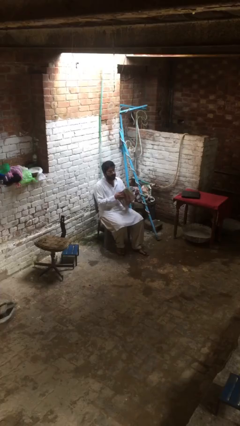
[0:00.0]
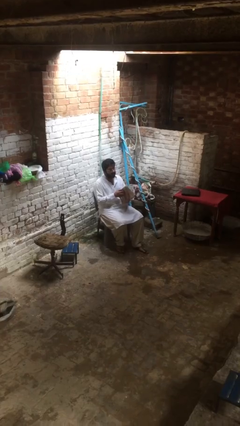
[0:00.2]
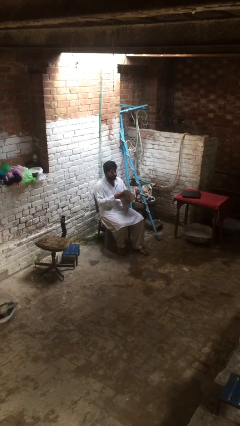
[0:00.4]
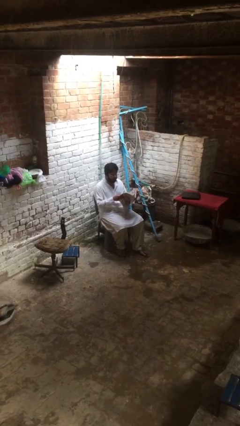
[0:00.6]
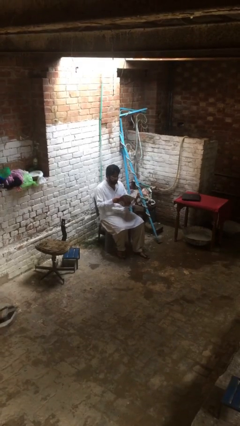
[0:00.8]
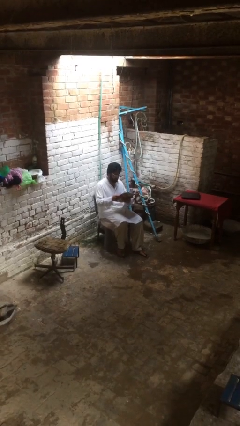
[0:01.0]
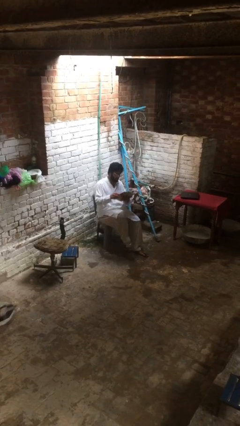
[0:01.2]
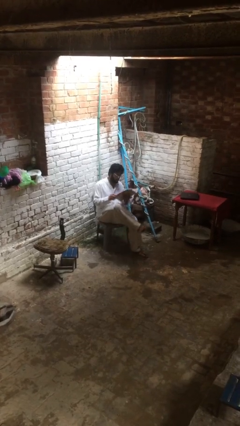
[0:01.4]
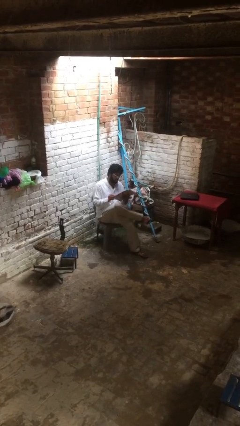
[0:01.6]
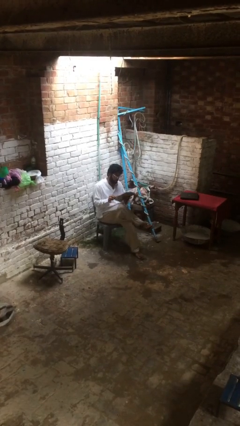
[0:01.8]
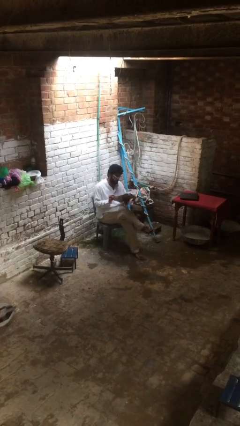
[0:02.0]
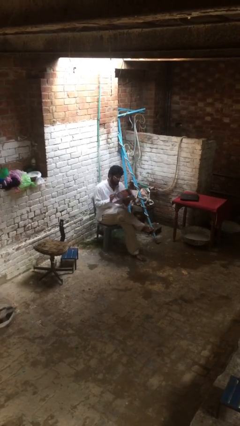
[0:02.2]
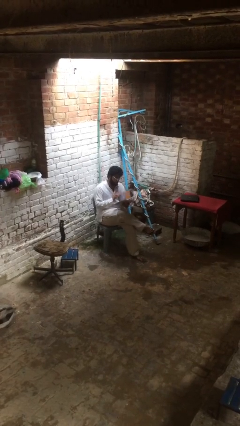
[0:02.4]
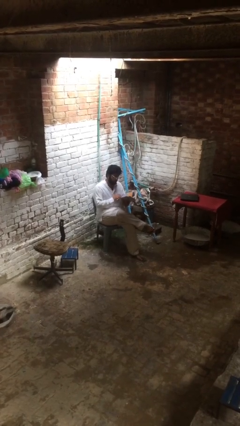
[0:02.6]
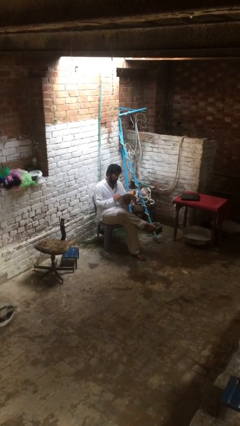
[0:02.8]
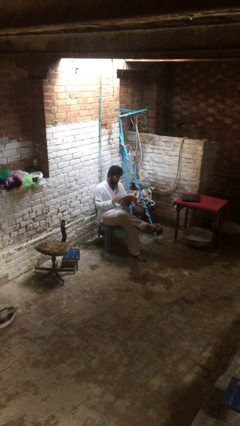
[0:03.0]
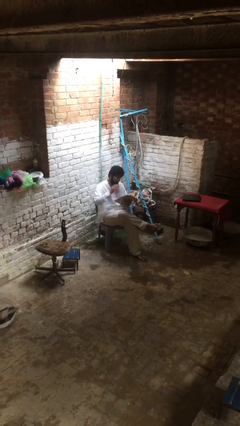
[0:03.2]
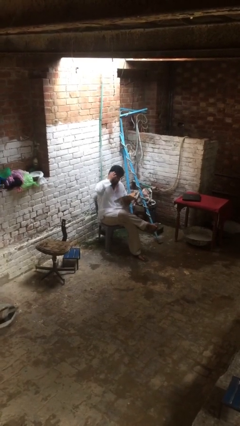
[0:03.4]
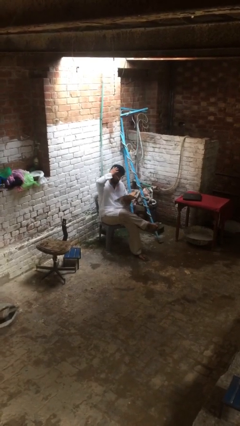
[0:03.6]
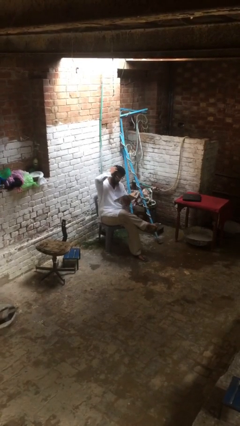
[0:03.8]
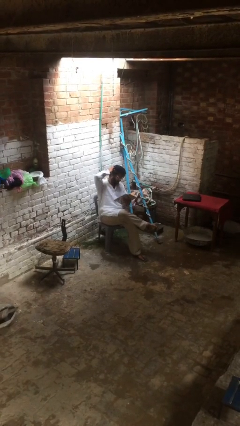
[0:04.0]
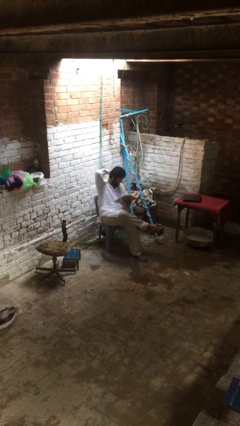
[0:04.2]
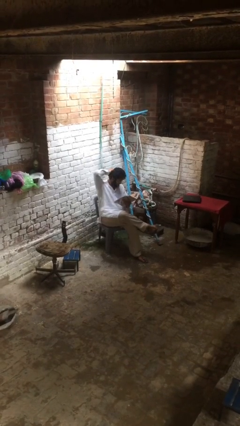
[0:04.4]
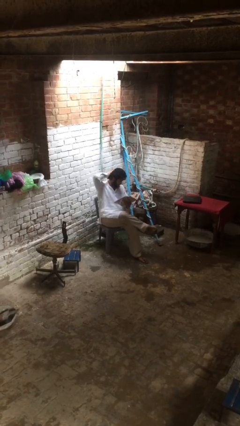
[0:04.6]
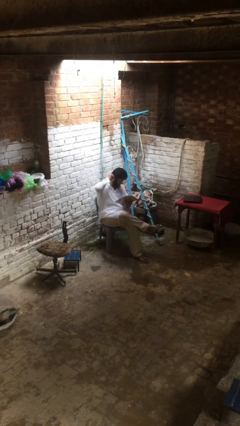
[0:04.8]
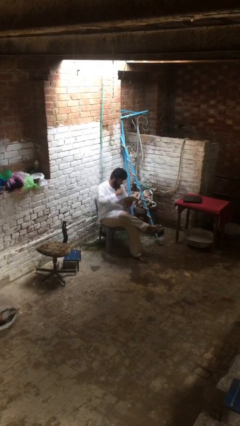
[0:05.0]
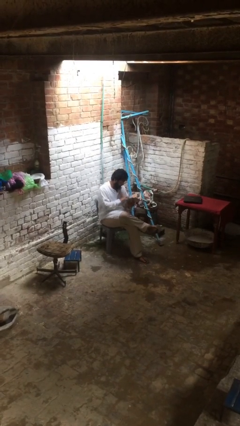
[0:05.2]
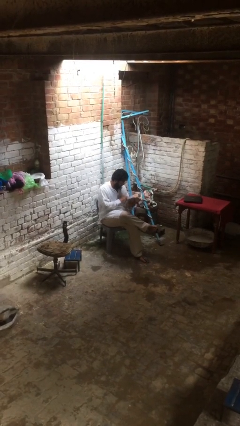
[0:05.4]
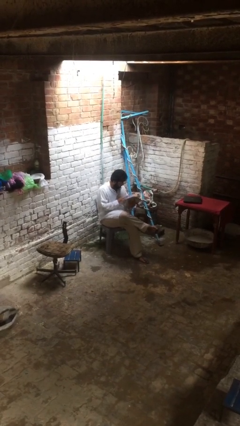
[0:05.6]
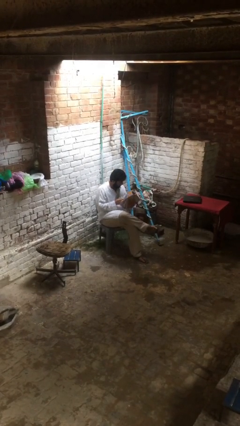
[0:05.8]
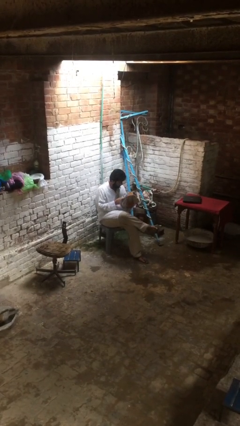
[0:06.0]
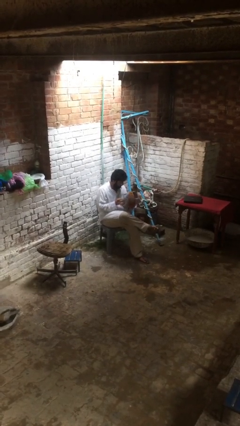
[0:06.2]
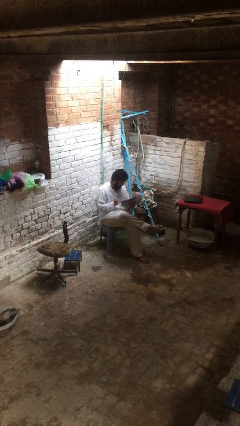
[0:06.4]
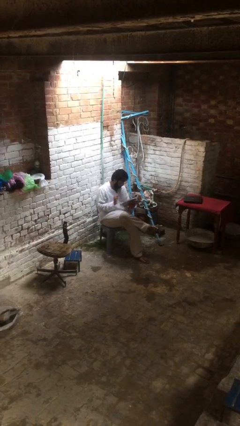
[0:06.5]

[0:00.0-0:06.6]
person reads document

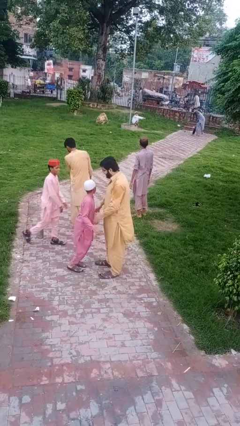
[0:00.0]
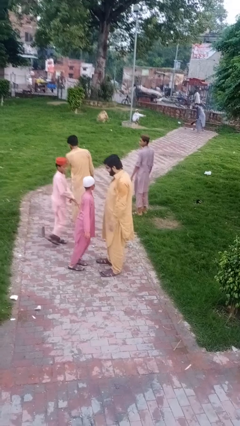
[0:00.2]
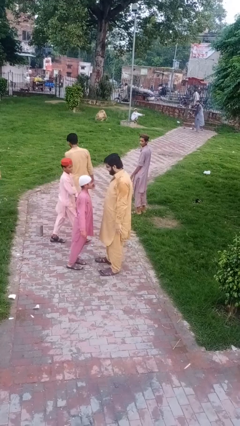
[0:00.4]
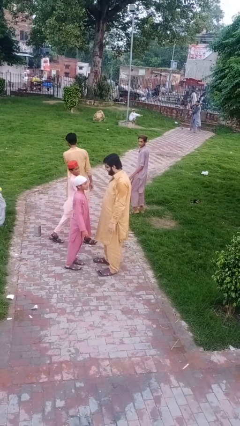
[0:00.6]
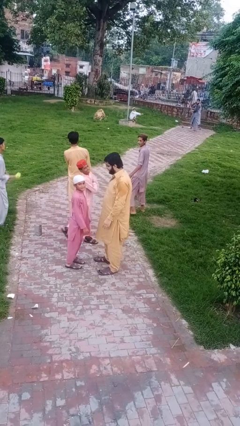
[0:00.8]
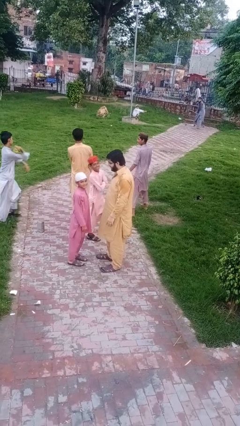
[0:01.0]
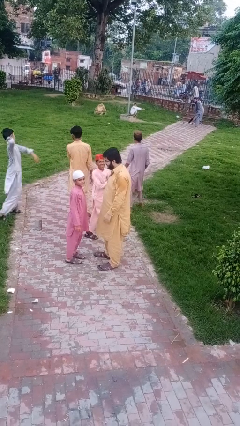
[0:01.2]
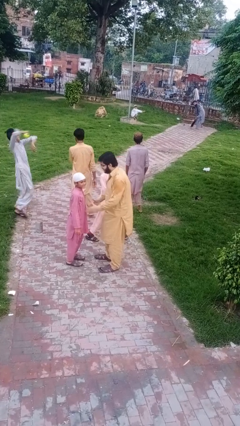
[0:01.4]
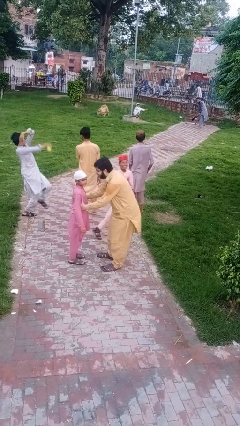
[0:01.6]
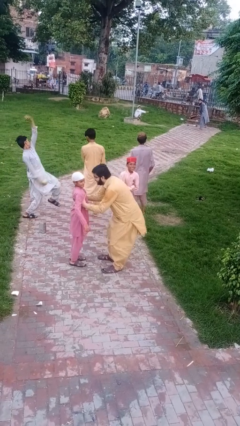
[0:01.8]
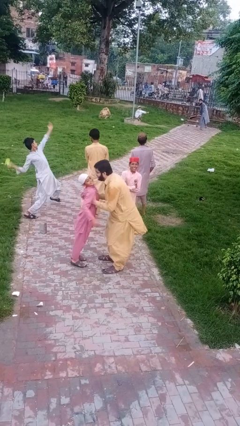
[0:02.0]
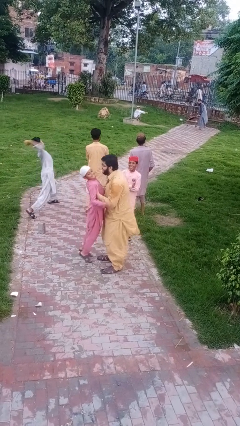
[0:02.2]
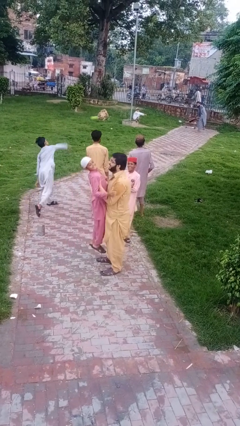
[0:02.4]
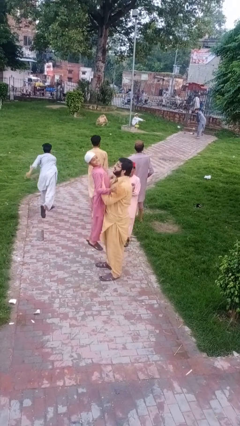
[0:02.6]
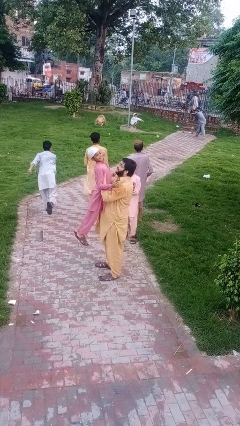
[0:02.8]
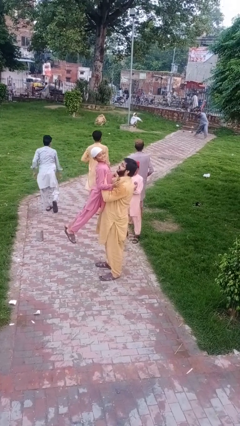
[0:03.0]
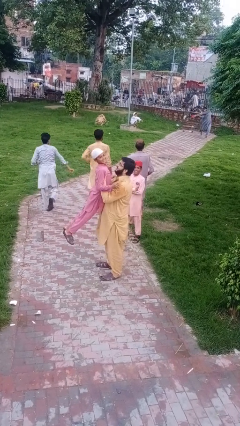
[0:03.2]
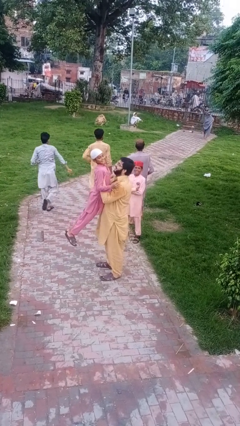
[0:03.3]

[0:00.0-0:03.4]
person picks up person

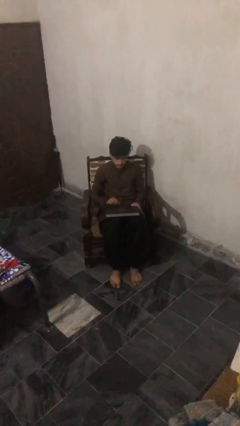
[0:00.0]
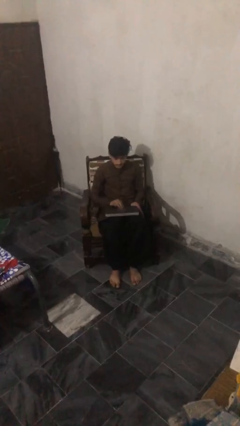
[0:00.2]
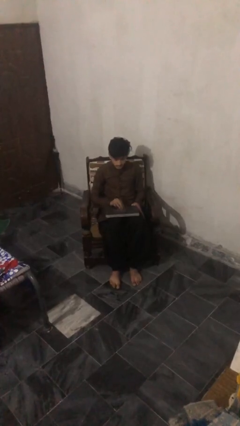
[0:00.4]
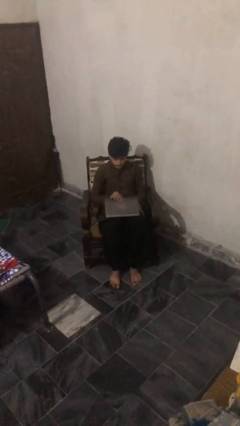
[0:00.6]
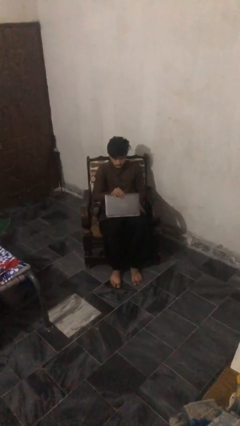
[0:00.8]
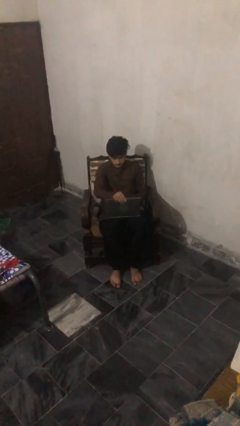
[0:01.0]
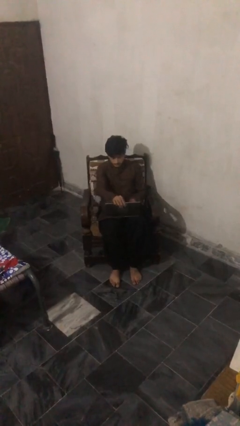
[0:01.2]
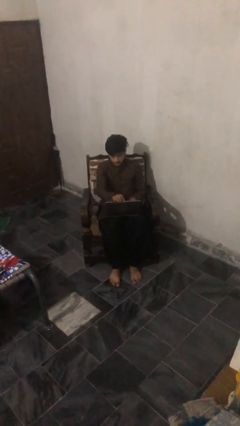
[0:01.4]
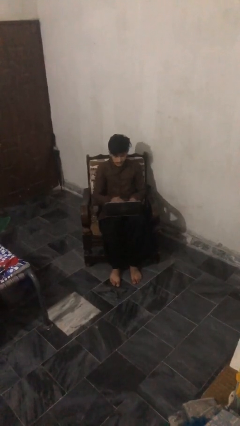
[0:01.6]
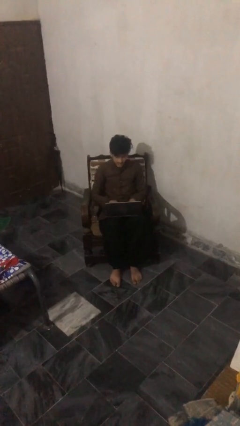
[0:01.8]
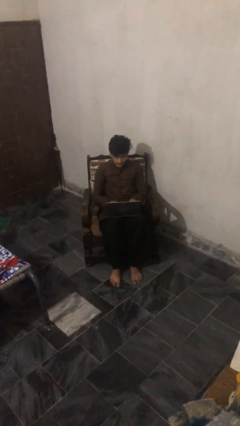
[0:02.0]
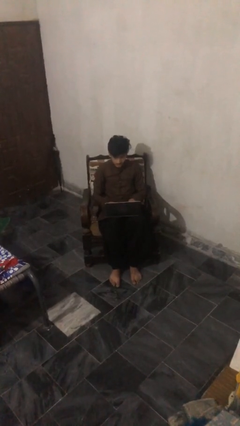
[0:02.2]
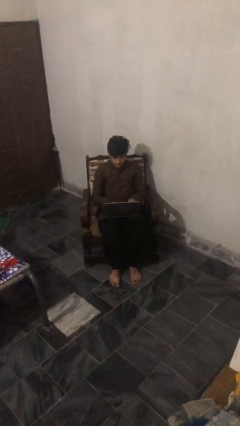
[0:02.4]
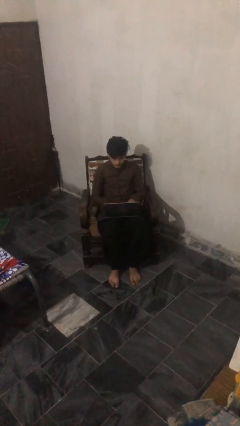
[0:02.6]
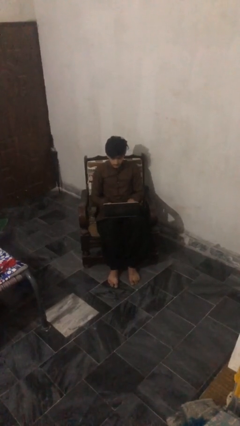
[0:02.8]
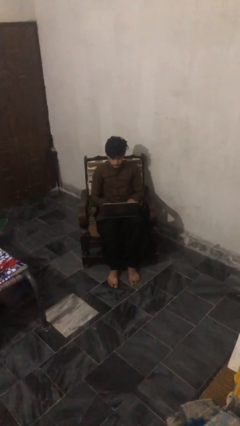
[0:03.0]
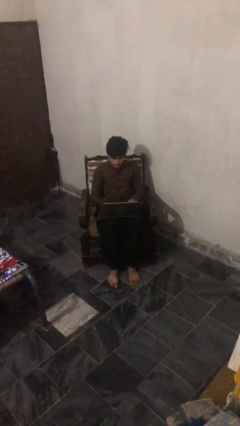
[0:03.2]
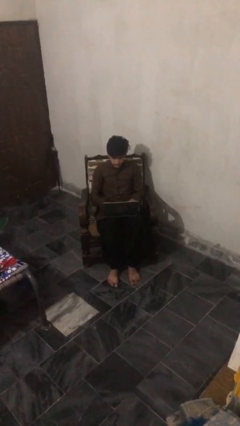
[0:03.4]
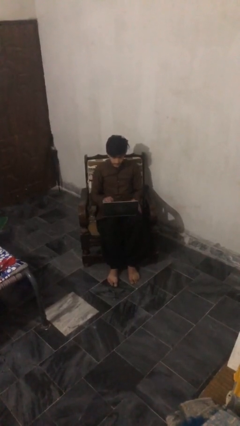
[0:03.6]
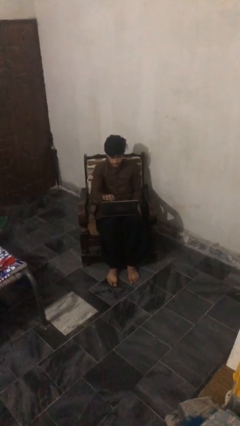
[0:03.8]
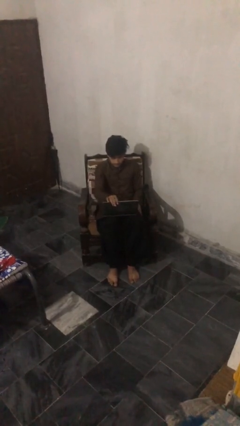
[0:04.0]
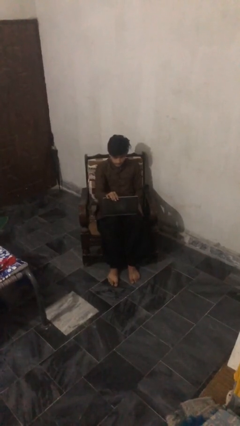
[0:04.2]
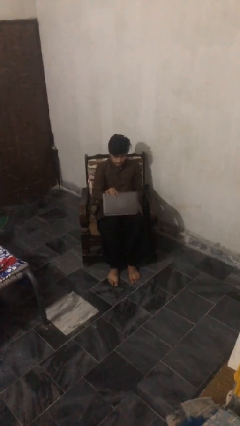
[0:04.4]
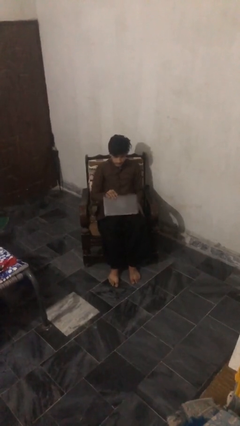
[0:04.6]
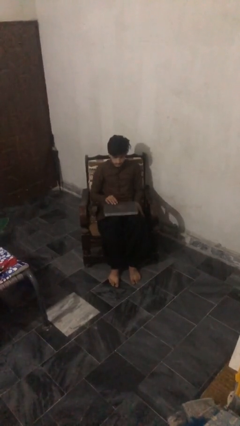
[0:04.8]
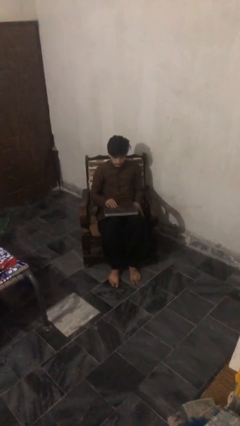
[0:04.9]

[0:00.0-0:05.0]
person interacts with laptop

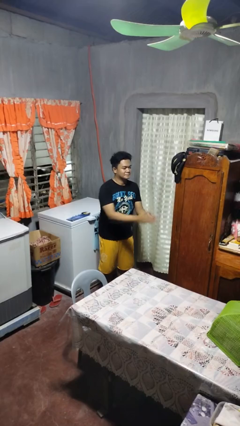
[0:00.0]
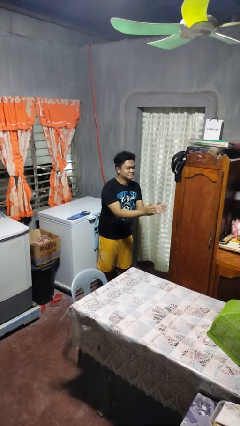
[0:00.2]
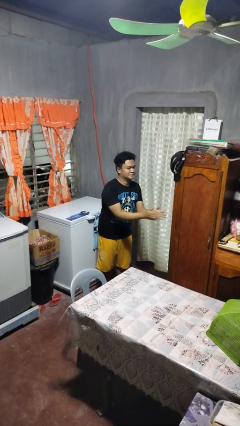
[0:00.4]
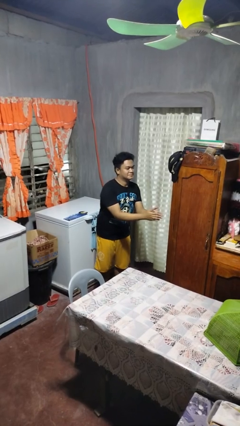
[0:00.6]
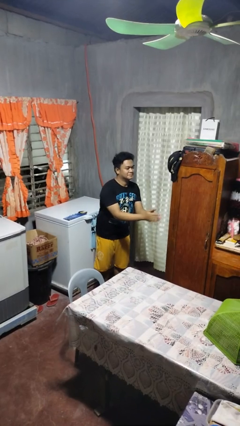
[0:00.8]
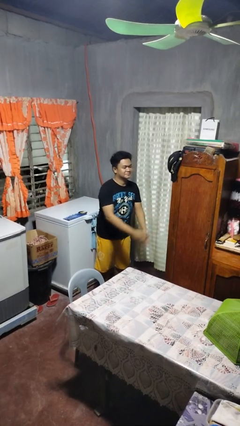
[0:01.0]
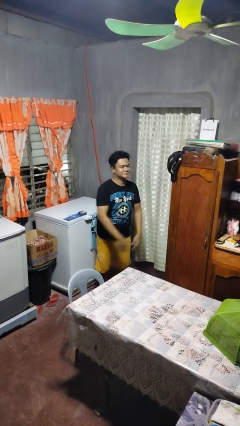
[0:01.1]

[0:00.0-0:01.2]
person claps hands

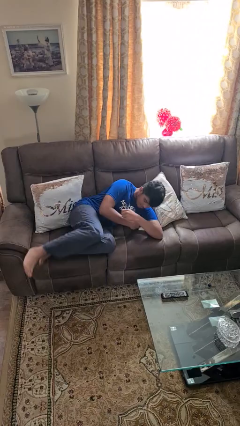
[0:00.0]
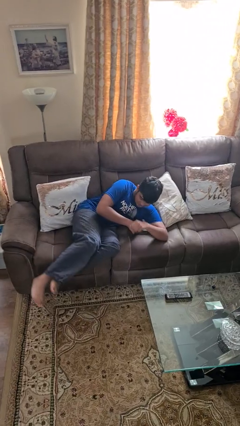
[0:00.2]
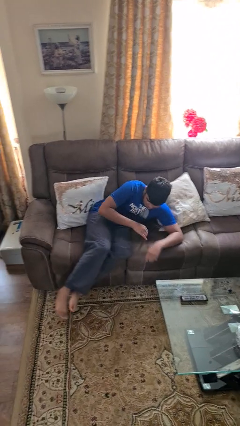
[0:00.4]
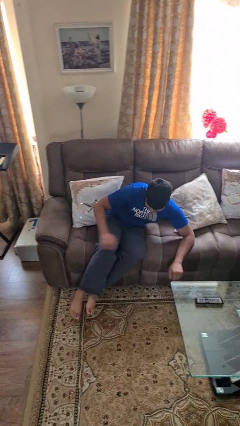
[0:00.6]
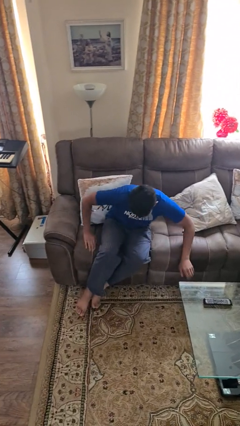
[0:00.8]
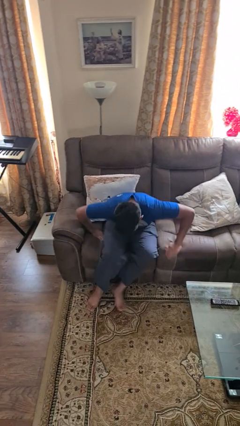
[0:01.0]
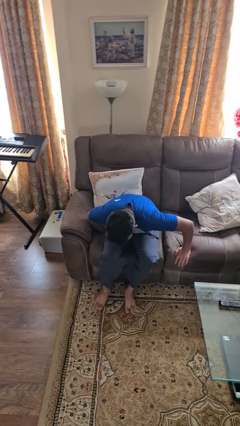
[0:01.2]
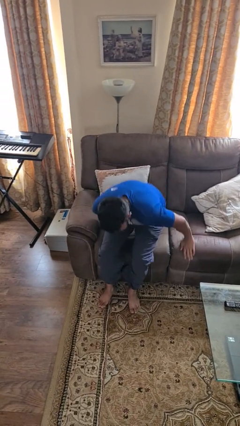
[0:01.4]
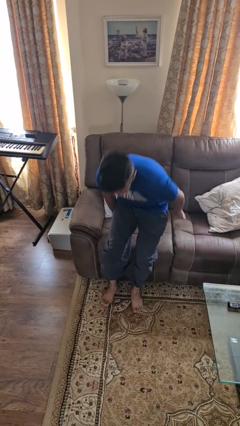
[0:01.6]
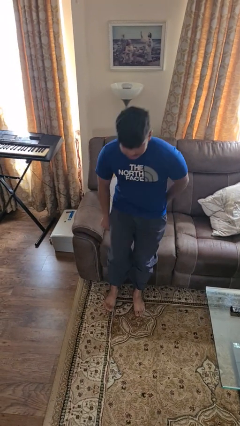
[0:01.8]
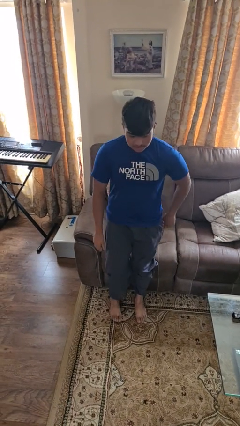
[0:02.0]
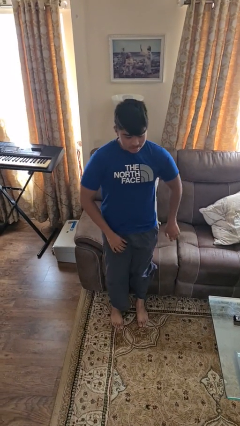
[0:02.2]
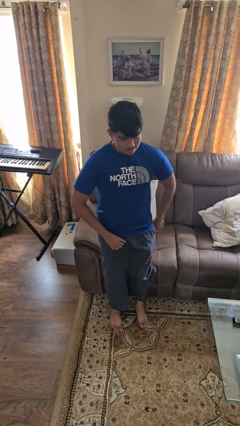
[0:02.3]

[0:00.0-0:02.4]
person stands up
